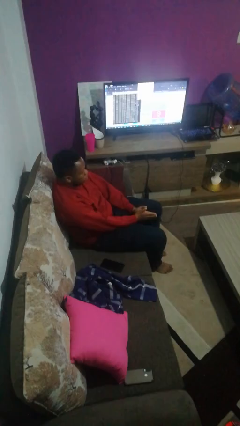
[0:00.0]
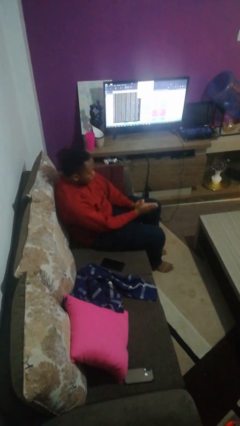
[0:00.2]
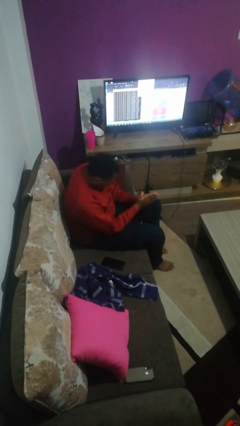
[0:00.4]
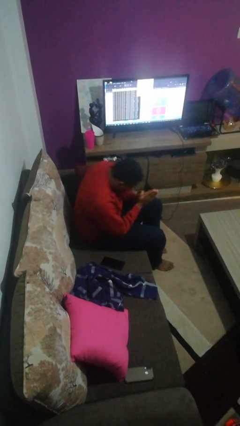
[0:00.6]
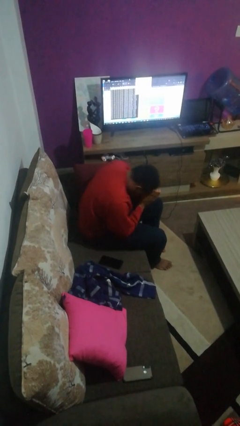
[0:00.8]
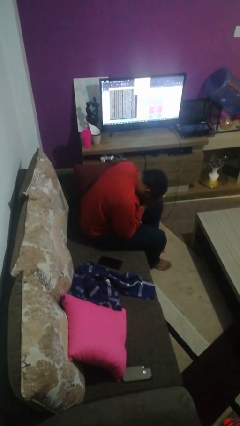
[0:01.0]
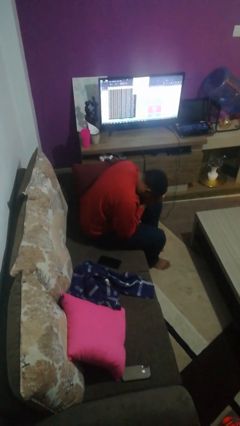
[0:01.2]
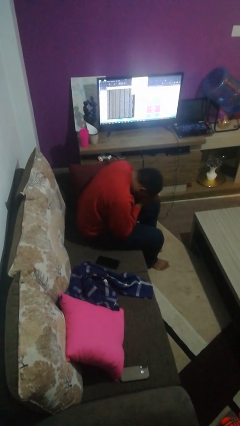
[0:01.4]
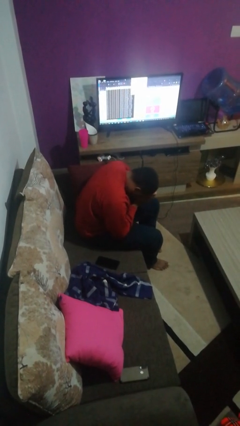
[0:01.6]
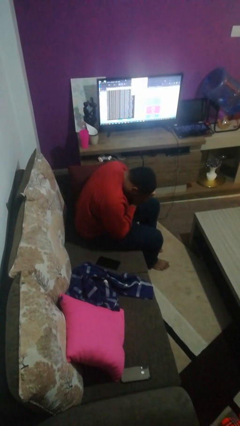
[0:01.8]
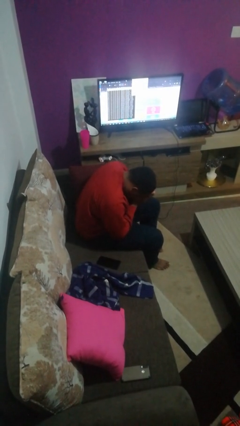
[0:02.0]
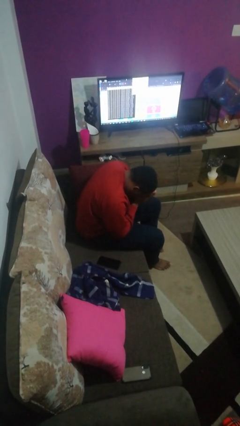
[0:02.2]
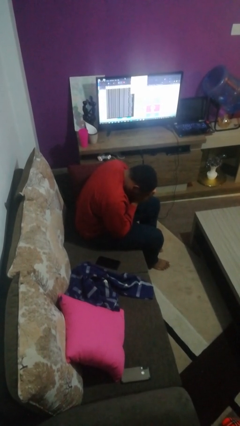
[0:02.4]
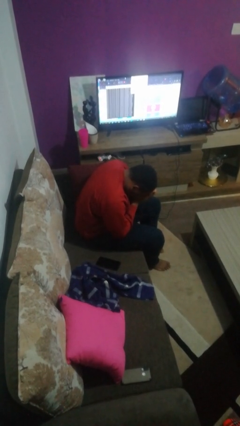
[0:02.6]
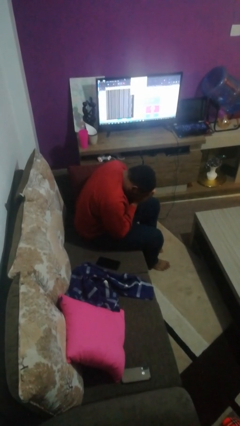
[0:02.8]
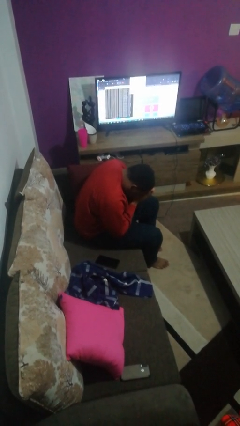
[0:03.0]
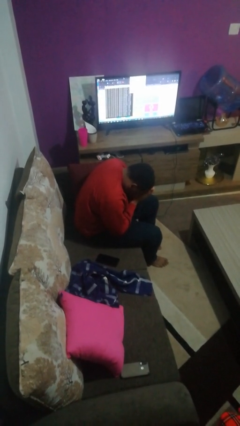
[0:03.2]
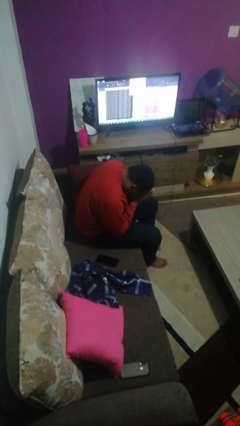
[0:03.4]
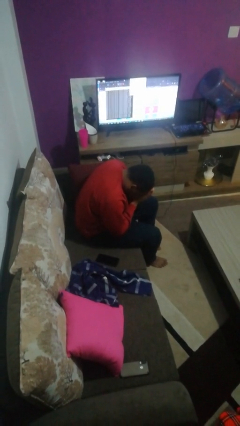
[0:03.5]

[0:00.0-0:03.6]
person prays

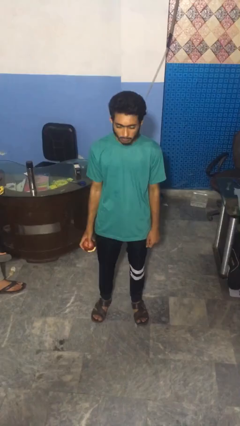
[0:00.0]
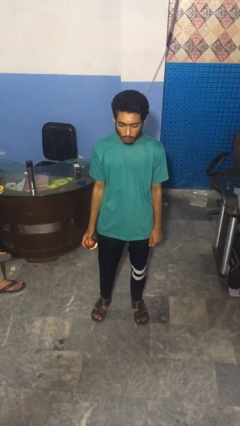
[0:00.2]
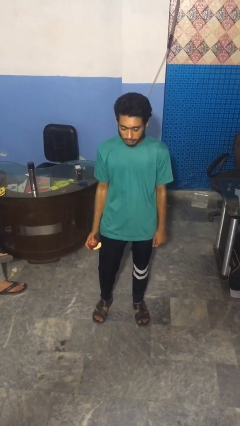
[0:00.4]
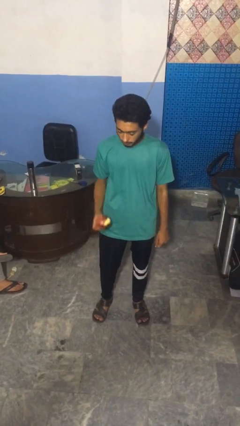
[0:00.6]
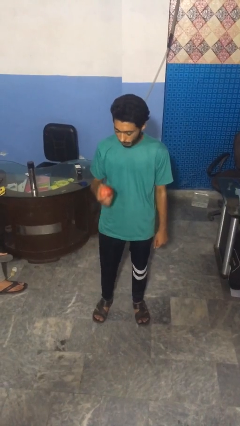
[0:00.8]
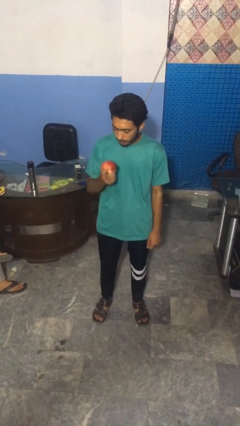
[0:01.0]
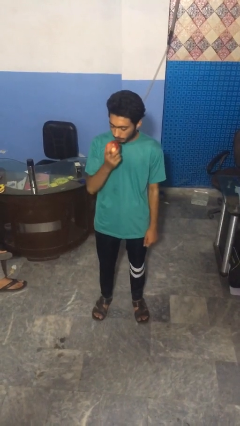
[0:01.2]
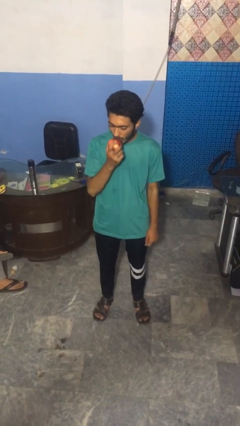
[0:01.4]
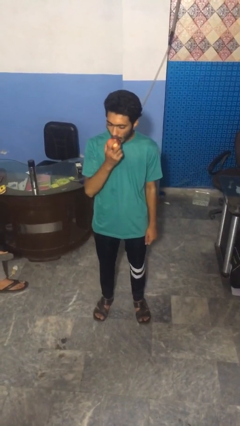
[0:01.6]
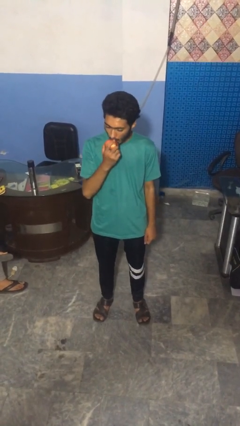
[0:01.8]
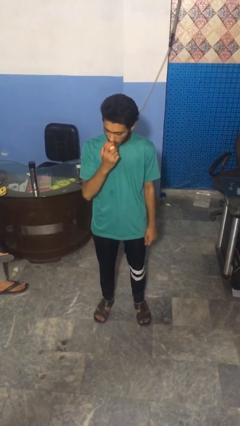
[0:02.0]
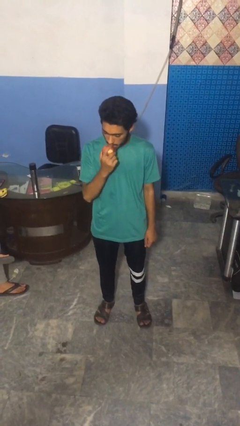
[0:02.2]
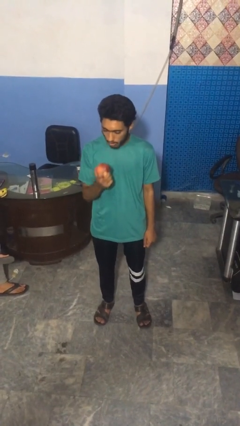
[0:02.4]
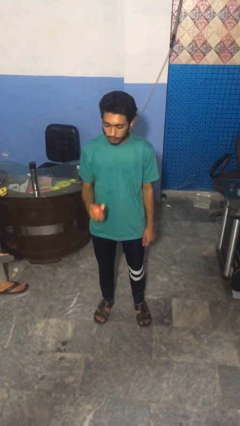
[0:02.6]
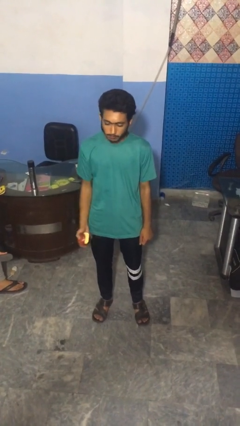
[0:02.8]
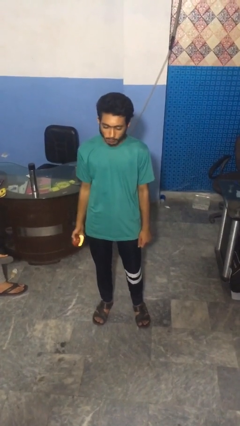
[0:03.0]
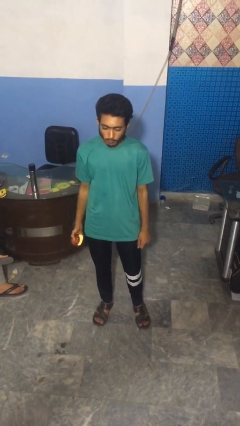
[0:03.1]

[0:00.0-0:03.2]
person eats apple

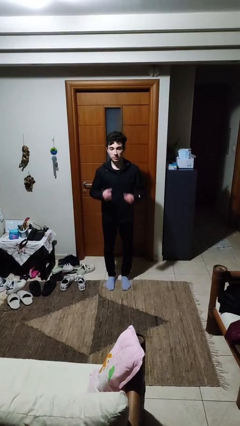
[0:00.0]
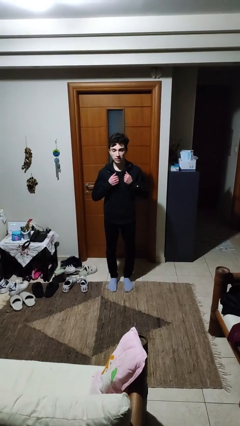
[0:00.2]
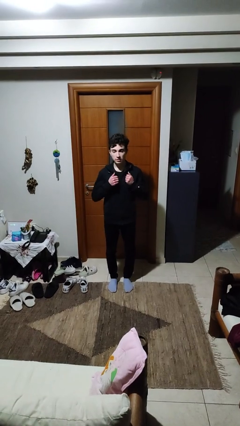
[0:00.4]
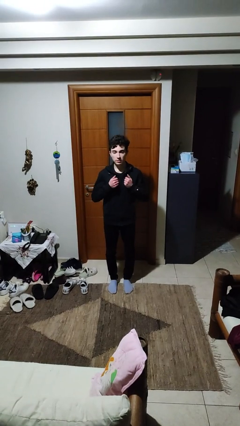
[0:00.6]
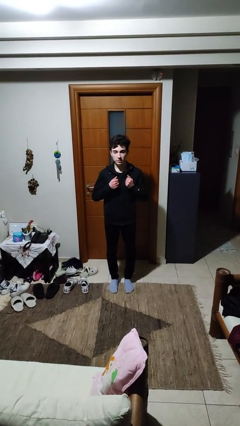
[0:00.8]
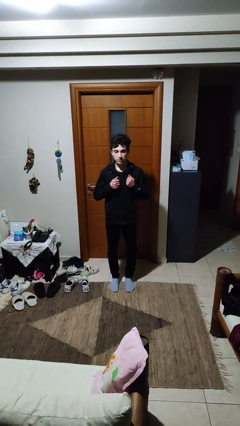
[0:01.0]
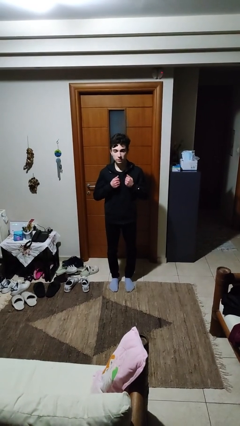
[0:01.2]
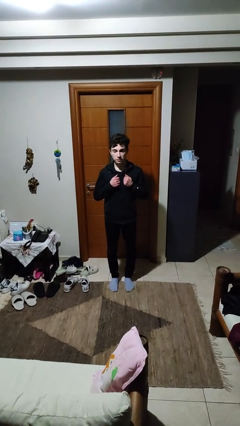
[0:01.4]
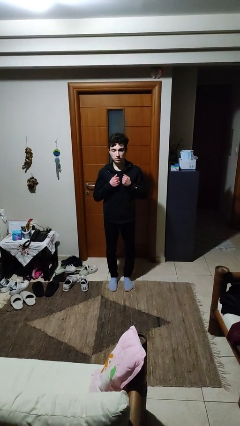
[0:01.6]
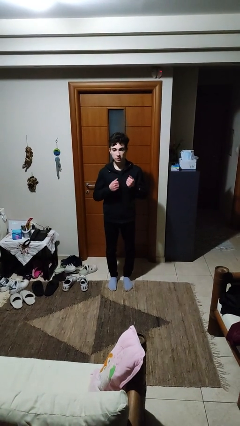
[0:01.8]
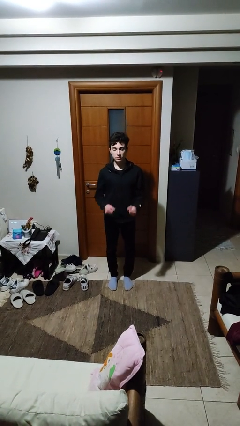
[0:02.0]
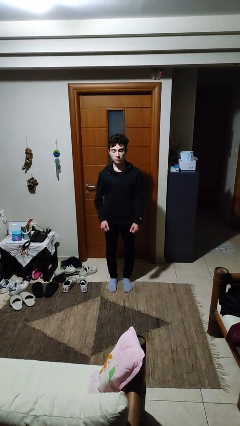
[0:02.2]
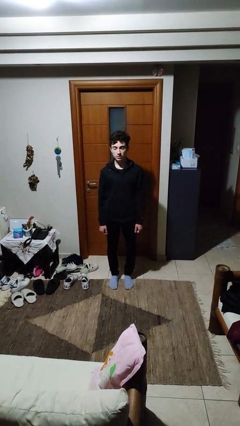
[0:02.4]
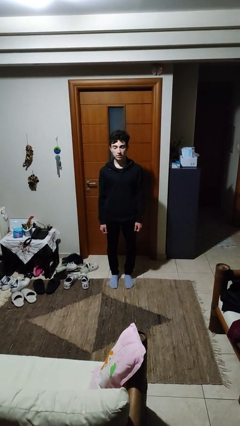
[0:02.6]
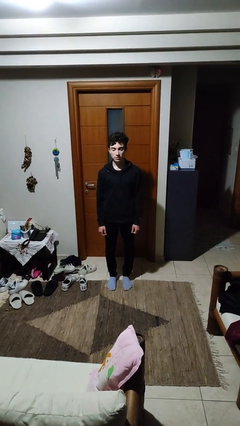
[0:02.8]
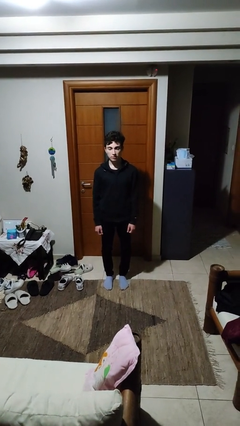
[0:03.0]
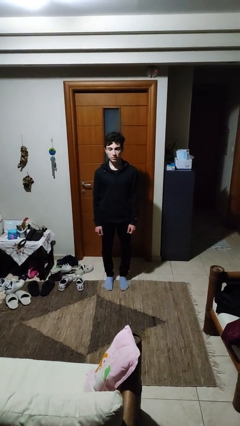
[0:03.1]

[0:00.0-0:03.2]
person drums on chest

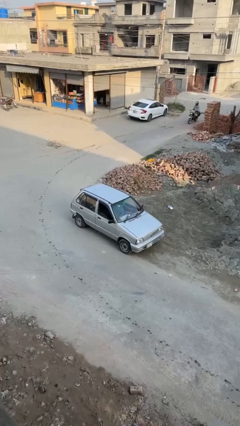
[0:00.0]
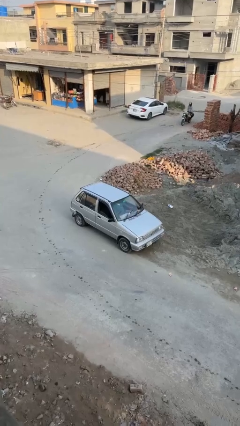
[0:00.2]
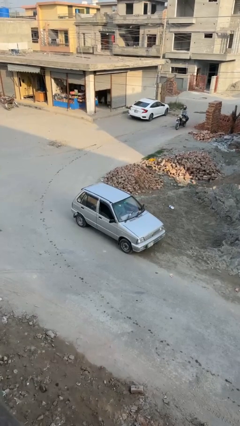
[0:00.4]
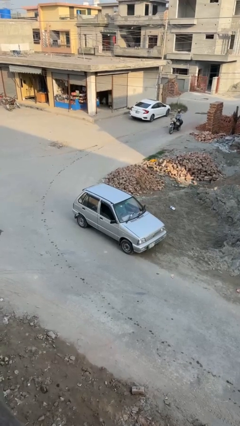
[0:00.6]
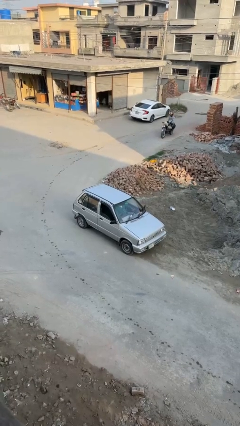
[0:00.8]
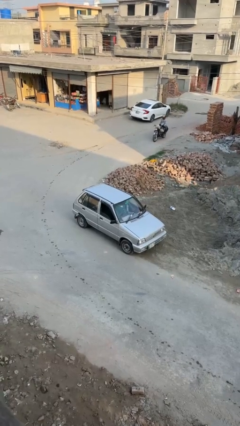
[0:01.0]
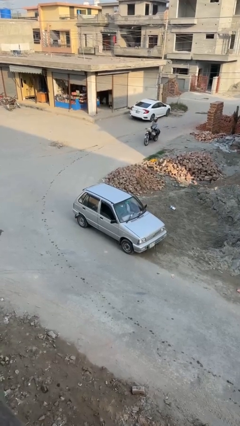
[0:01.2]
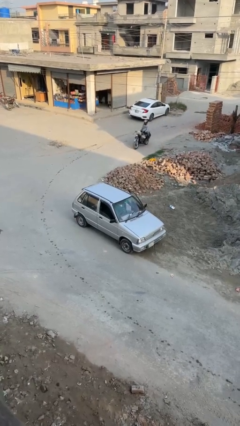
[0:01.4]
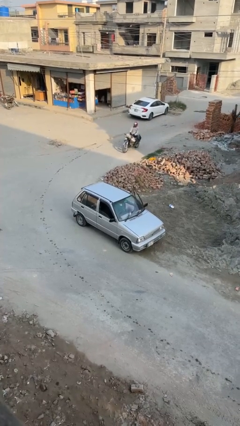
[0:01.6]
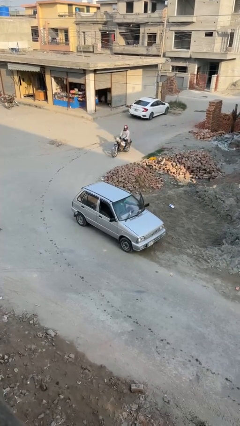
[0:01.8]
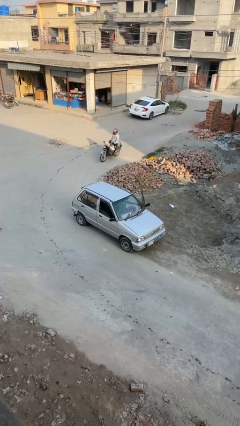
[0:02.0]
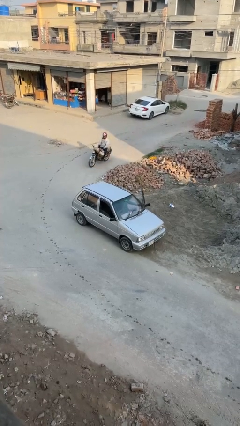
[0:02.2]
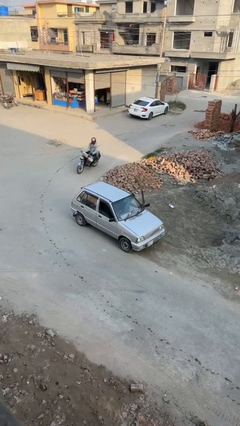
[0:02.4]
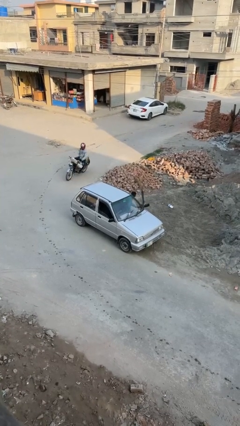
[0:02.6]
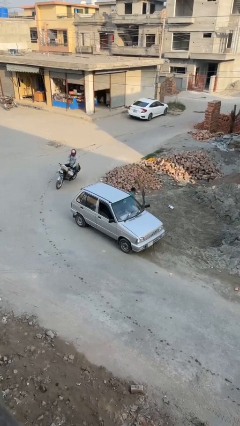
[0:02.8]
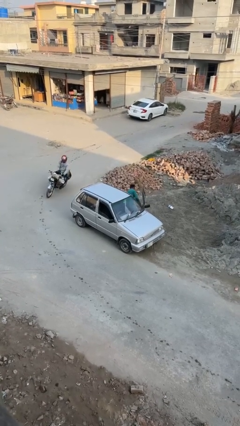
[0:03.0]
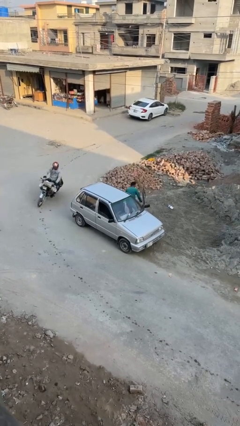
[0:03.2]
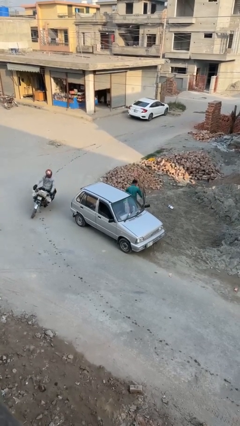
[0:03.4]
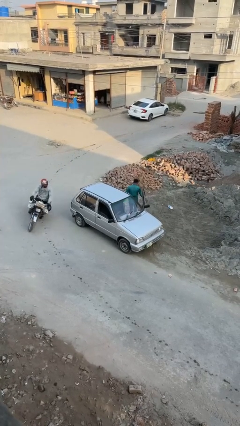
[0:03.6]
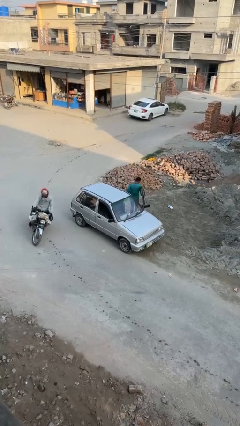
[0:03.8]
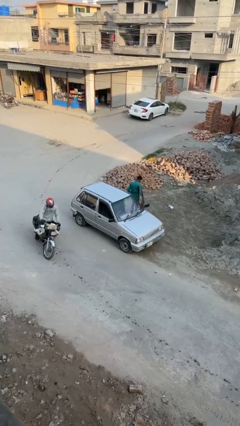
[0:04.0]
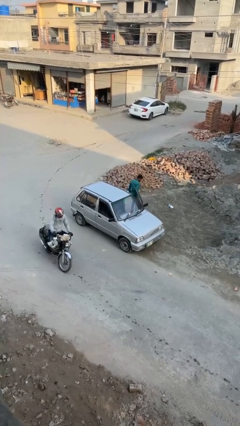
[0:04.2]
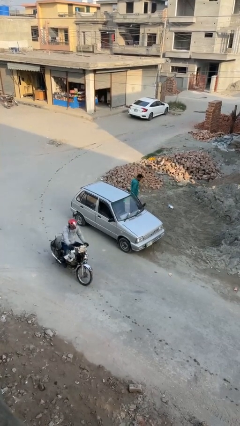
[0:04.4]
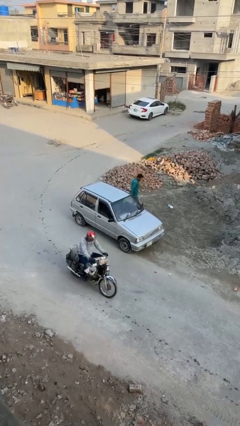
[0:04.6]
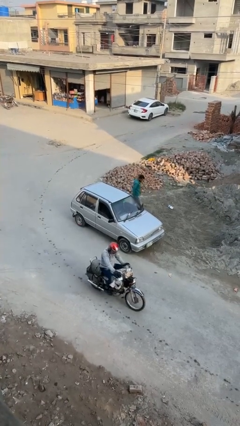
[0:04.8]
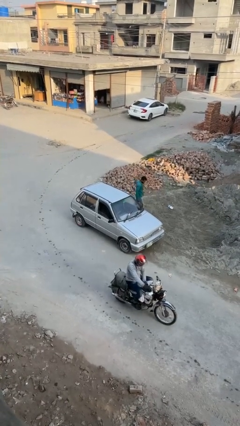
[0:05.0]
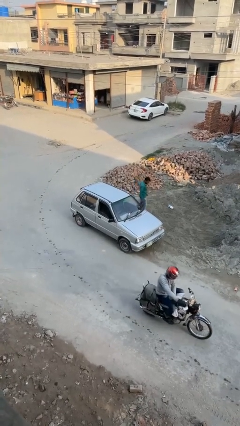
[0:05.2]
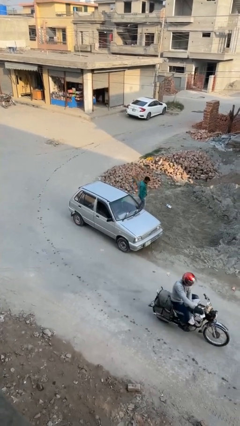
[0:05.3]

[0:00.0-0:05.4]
car drops off person

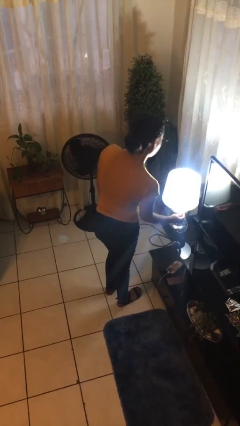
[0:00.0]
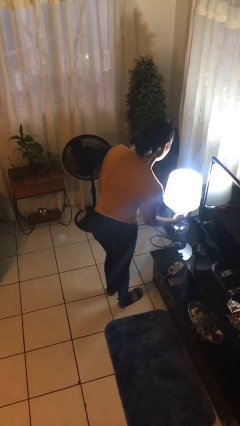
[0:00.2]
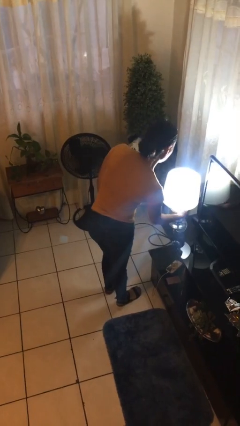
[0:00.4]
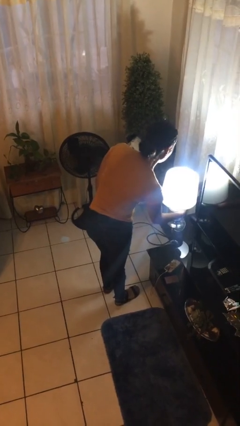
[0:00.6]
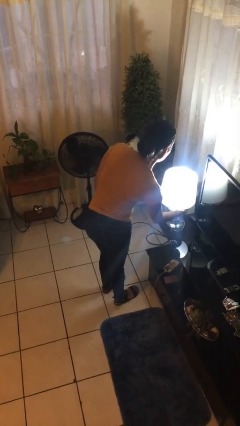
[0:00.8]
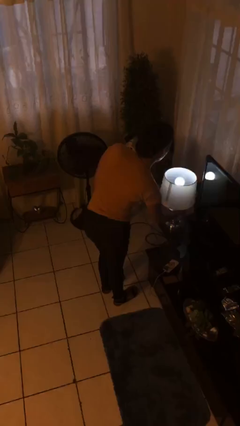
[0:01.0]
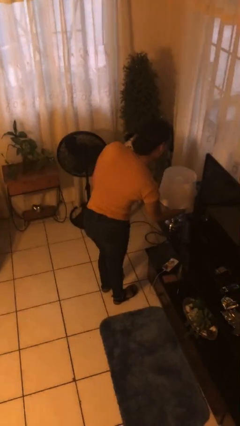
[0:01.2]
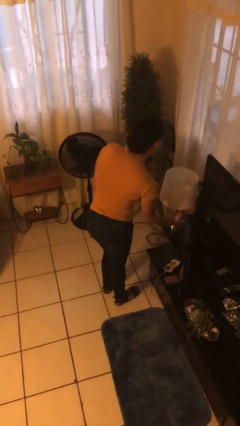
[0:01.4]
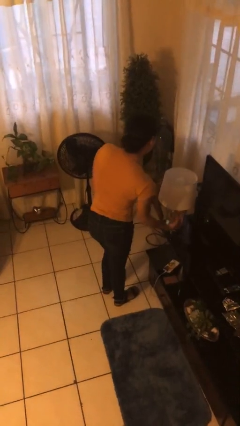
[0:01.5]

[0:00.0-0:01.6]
person turns off lamp
